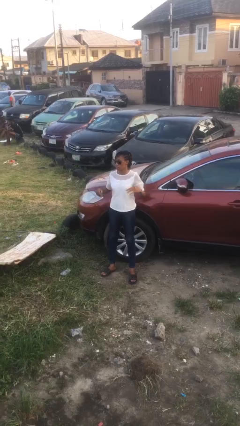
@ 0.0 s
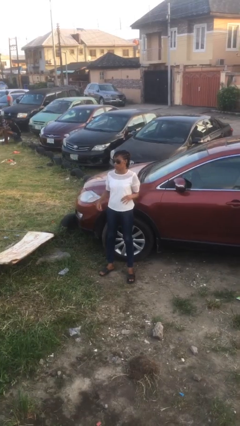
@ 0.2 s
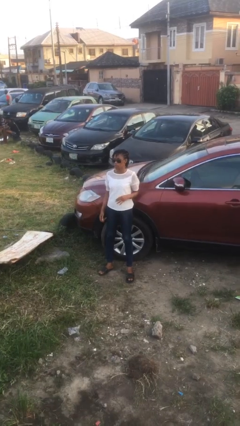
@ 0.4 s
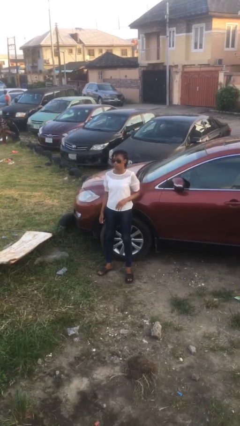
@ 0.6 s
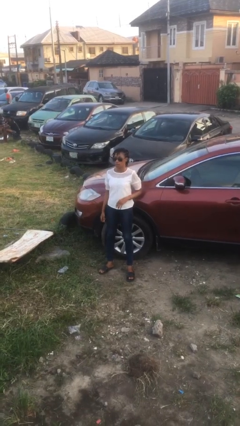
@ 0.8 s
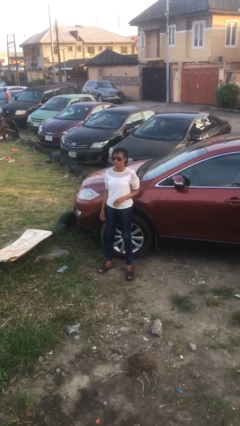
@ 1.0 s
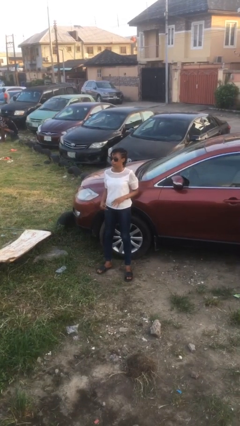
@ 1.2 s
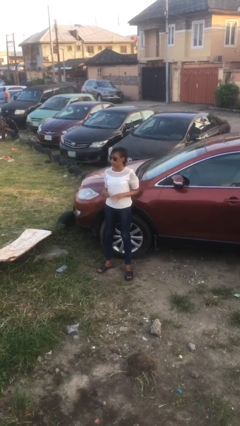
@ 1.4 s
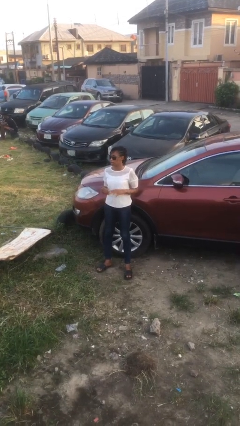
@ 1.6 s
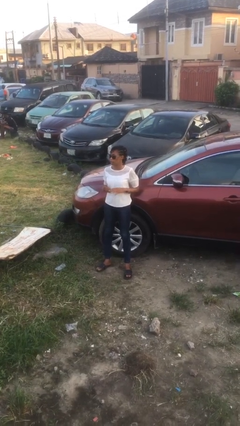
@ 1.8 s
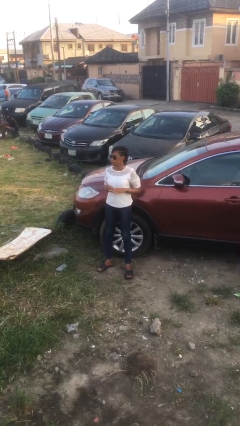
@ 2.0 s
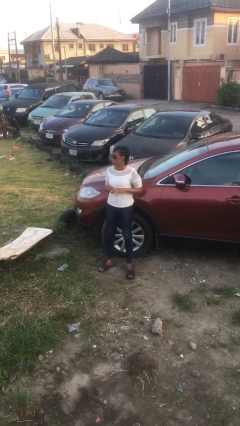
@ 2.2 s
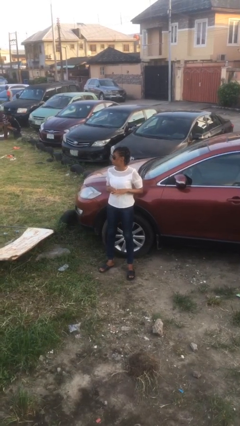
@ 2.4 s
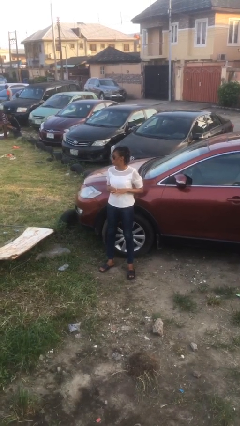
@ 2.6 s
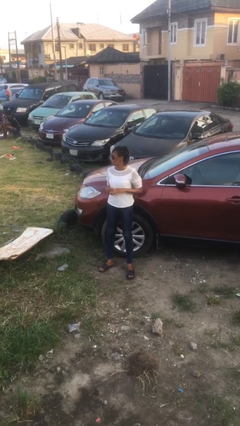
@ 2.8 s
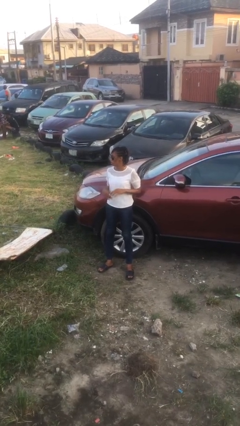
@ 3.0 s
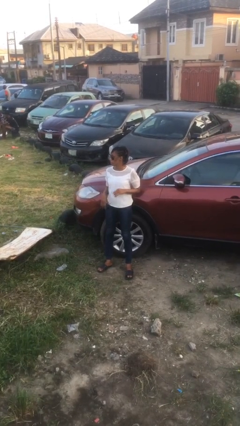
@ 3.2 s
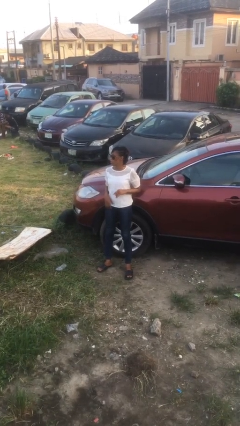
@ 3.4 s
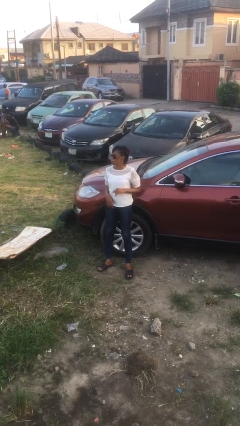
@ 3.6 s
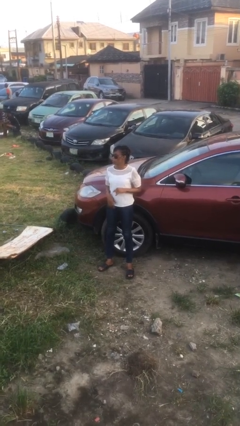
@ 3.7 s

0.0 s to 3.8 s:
person puts on ring

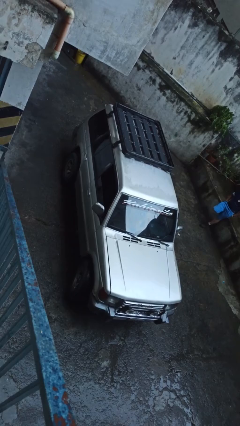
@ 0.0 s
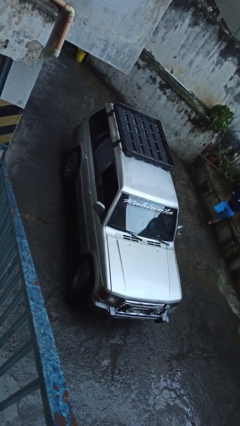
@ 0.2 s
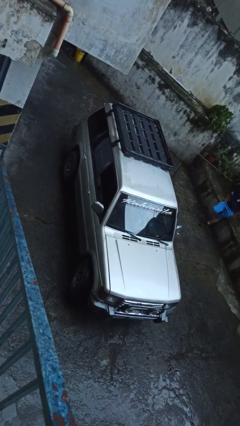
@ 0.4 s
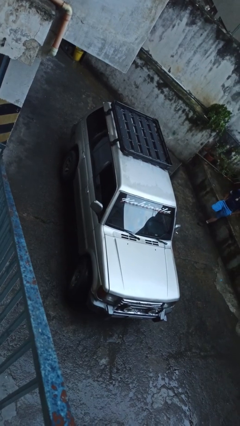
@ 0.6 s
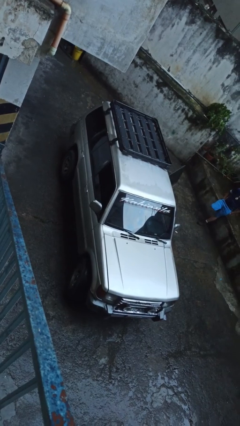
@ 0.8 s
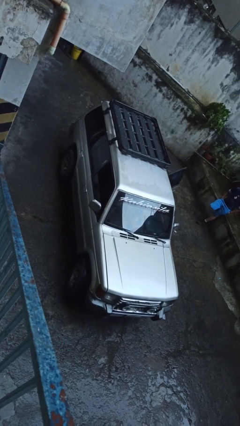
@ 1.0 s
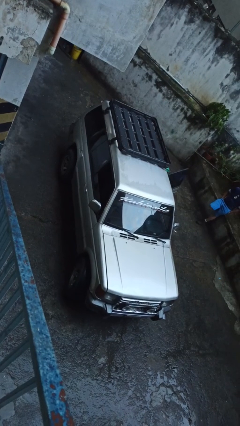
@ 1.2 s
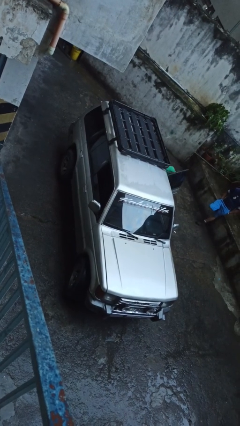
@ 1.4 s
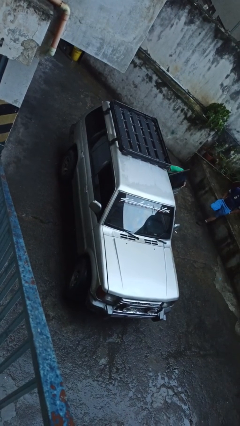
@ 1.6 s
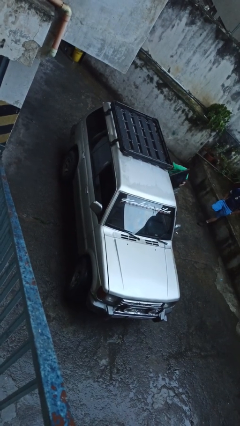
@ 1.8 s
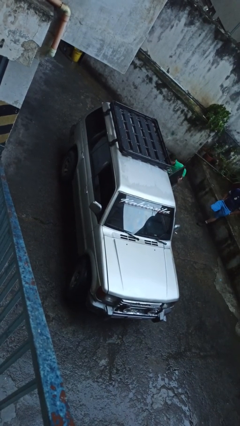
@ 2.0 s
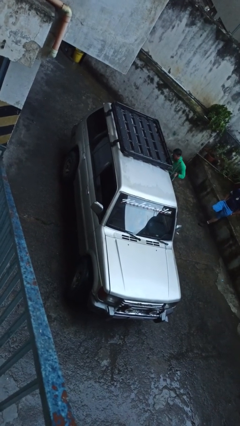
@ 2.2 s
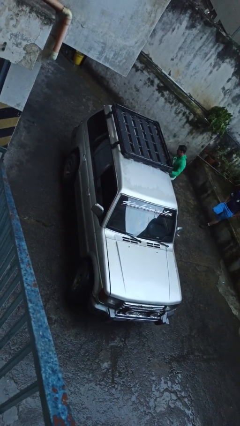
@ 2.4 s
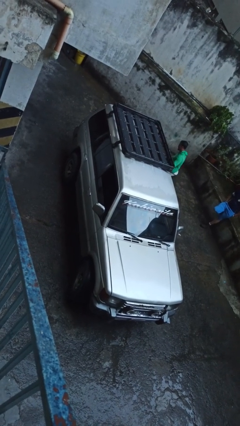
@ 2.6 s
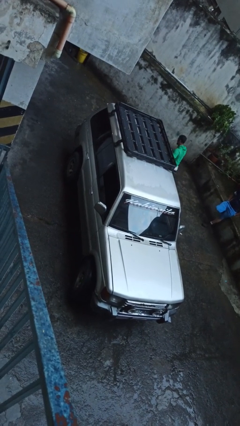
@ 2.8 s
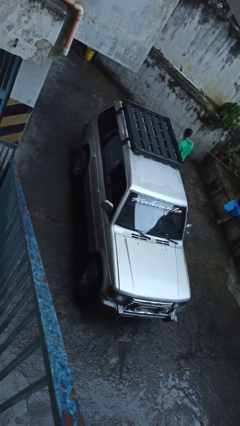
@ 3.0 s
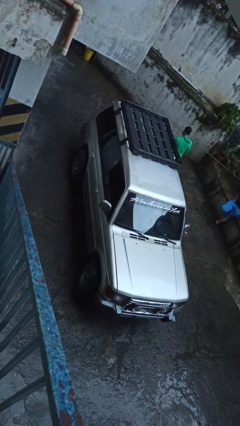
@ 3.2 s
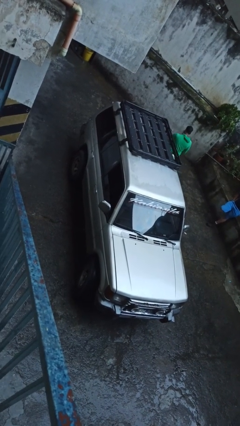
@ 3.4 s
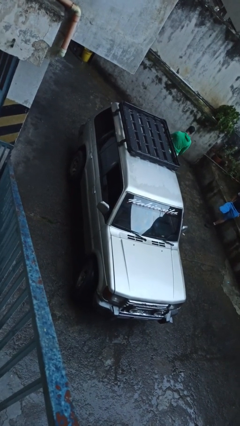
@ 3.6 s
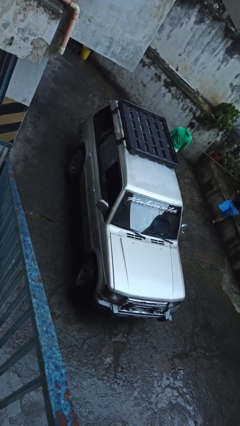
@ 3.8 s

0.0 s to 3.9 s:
car drops off person

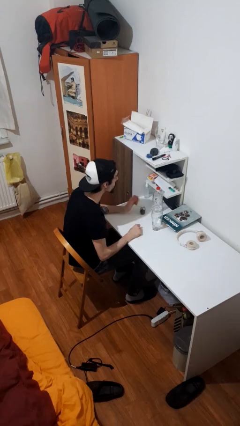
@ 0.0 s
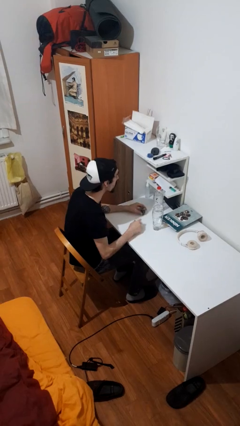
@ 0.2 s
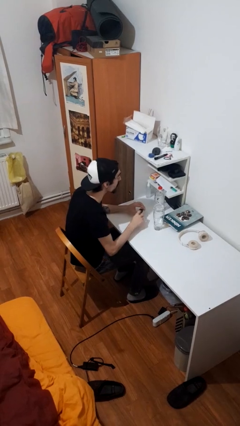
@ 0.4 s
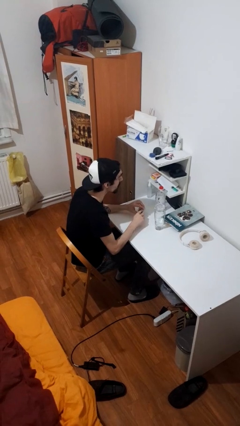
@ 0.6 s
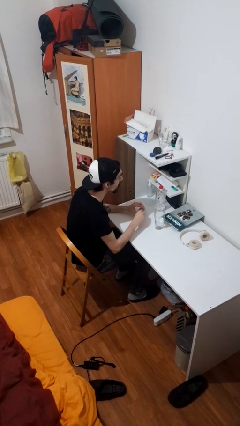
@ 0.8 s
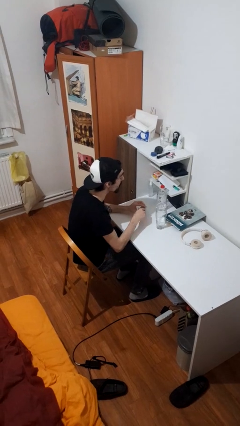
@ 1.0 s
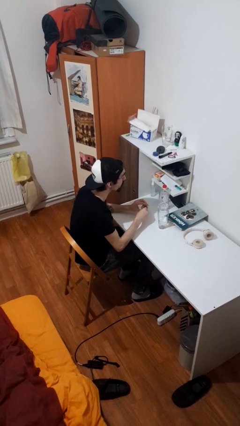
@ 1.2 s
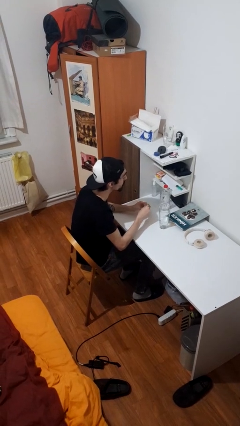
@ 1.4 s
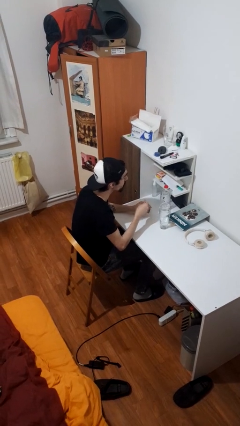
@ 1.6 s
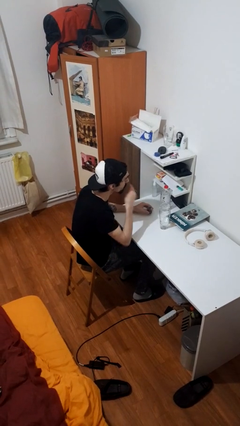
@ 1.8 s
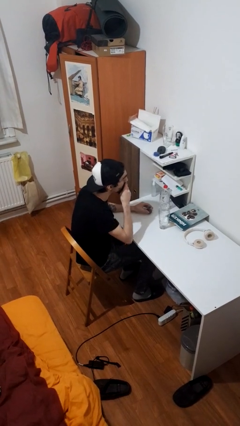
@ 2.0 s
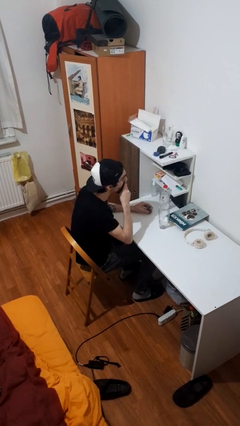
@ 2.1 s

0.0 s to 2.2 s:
person takes medicine pills

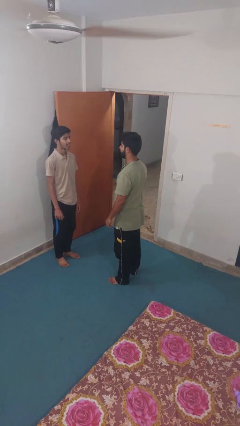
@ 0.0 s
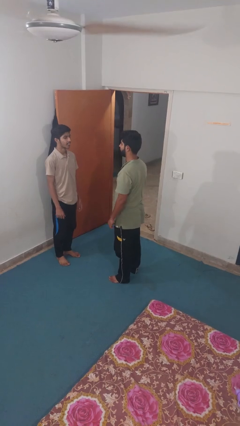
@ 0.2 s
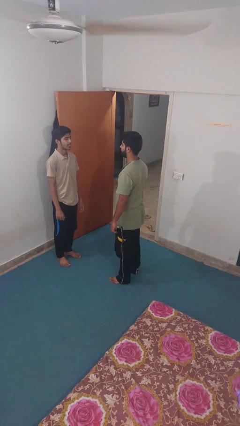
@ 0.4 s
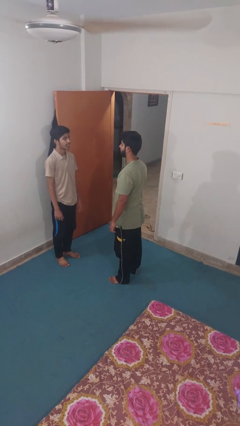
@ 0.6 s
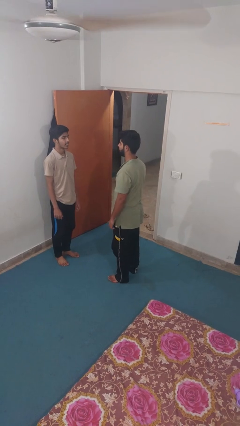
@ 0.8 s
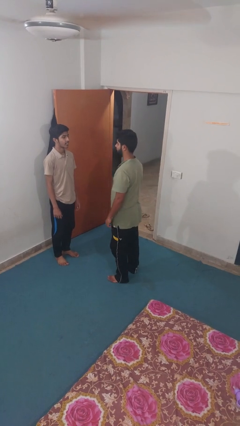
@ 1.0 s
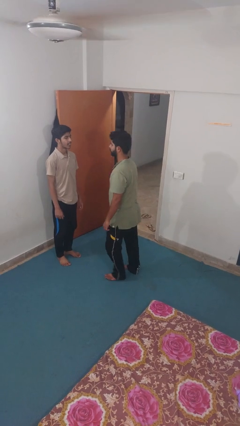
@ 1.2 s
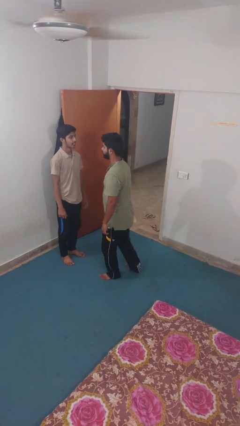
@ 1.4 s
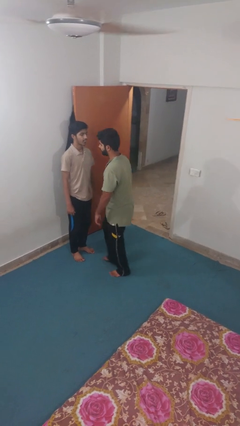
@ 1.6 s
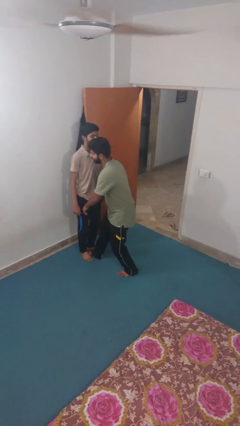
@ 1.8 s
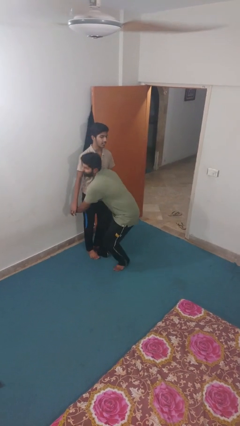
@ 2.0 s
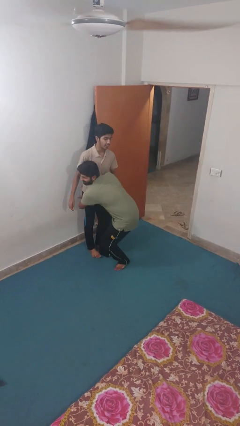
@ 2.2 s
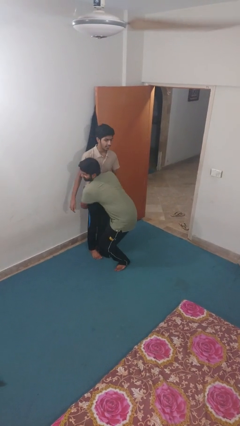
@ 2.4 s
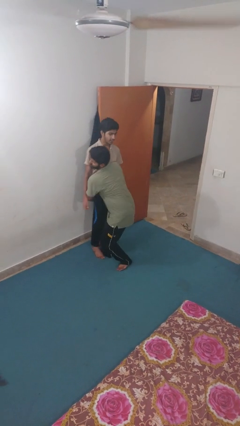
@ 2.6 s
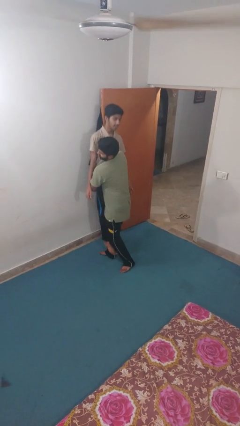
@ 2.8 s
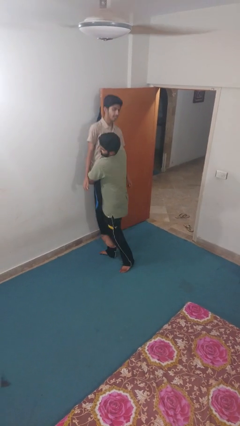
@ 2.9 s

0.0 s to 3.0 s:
person picks up person

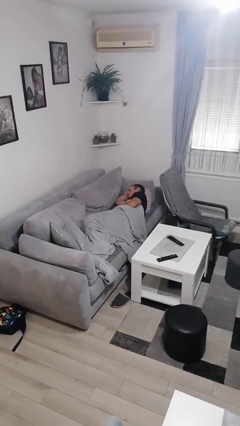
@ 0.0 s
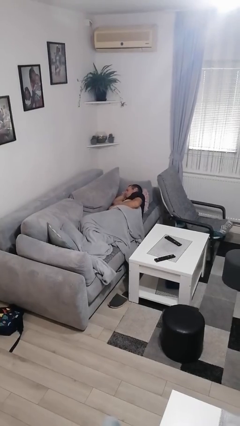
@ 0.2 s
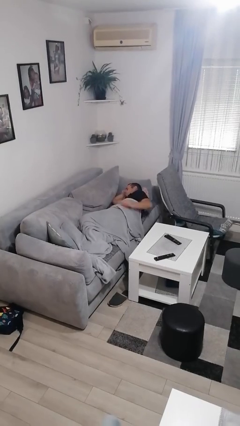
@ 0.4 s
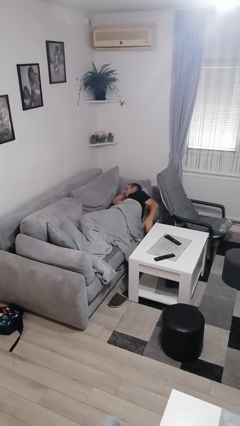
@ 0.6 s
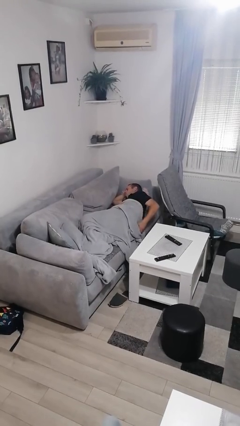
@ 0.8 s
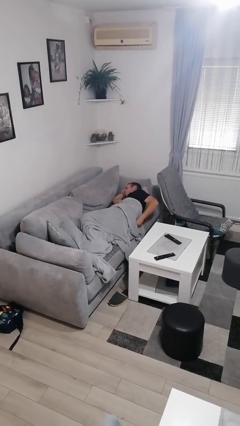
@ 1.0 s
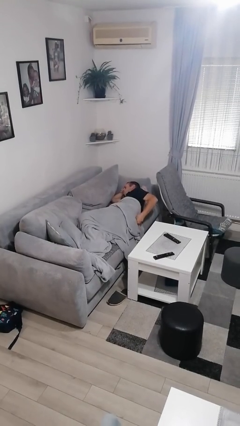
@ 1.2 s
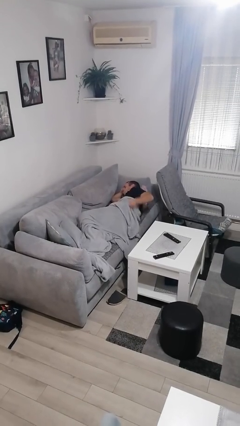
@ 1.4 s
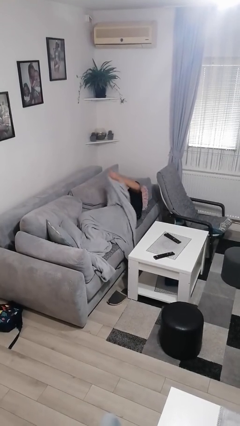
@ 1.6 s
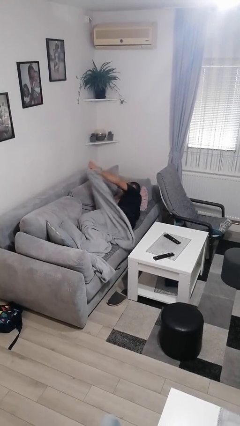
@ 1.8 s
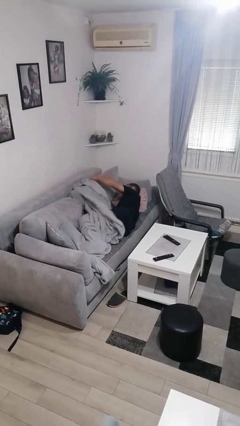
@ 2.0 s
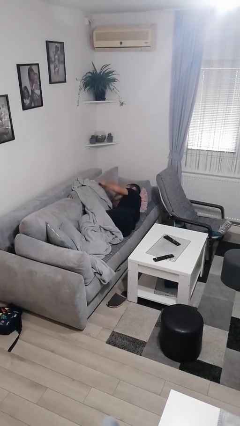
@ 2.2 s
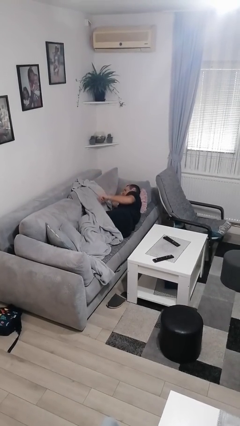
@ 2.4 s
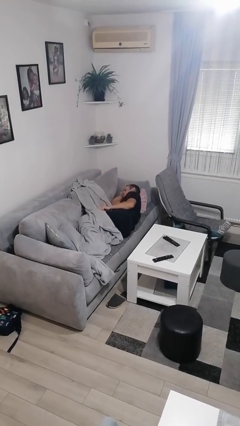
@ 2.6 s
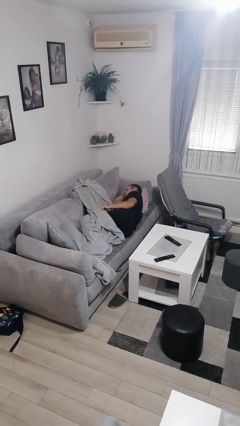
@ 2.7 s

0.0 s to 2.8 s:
person uncovers with blanket

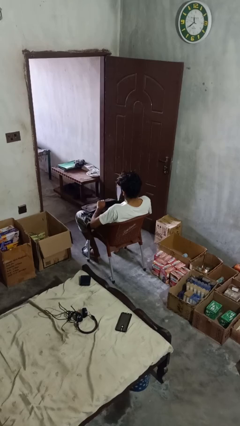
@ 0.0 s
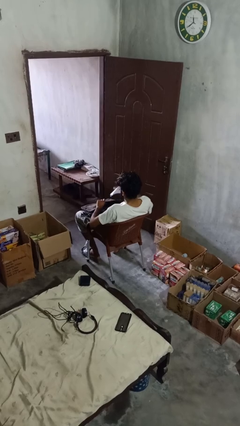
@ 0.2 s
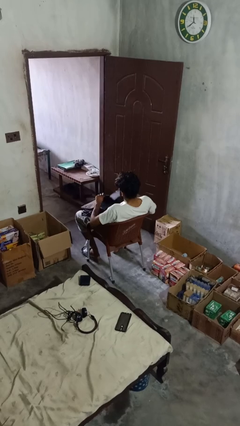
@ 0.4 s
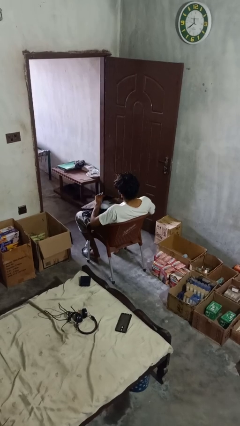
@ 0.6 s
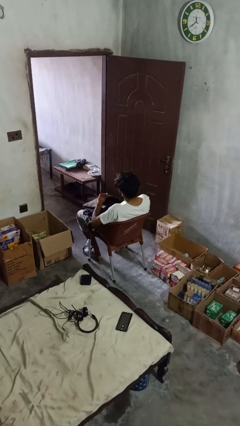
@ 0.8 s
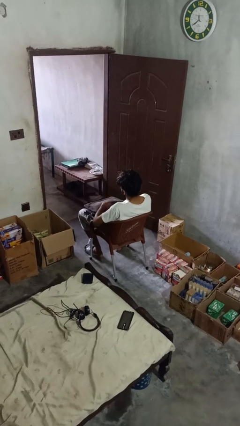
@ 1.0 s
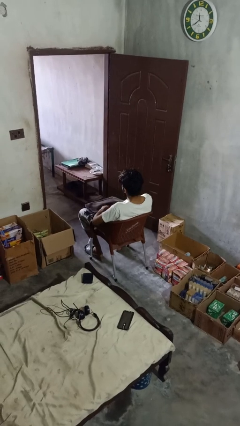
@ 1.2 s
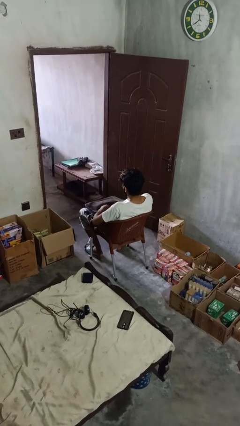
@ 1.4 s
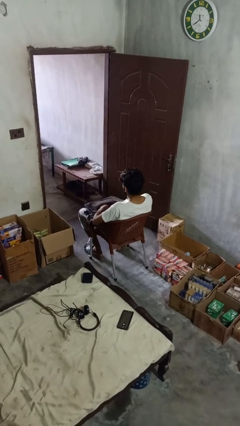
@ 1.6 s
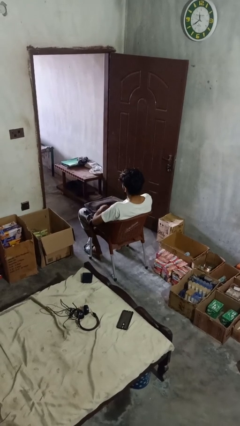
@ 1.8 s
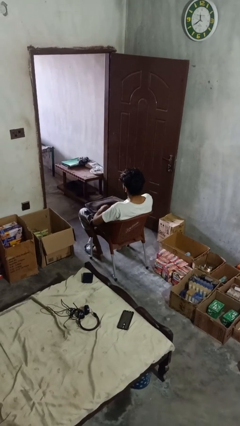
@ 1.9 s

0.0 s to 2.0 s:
person puts object into backpack
